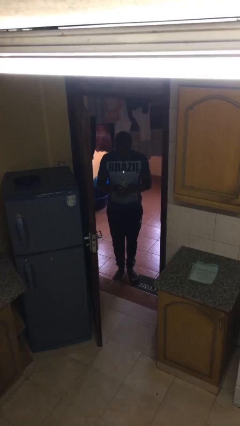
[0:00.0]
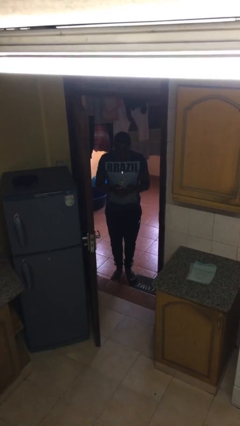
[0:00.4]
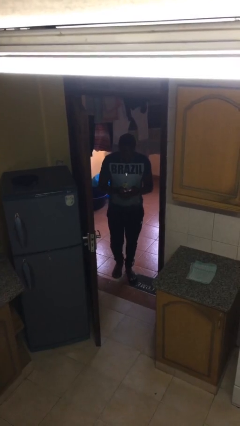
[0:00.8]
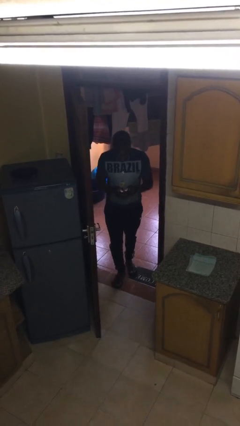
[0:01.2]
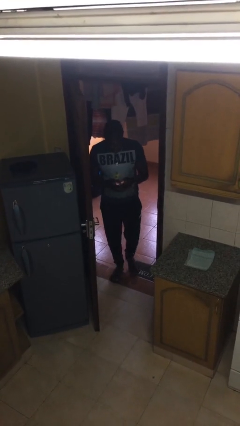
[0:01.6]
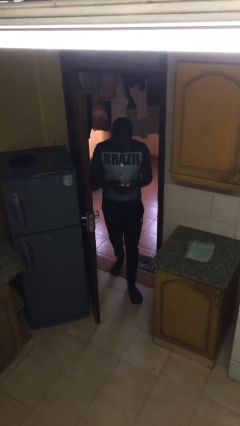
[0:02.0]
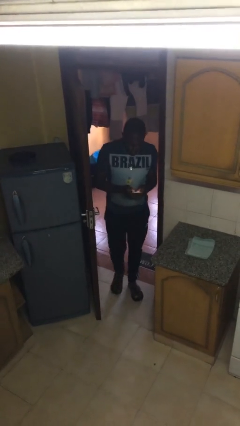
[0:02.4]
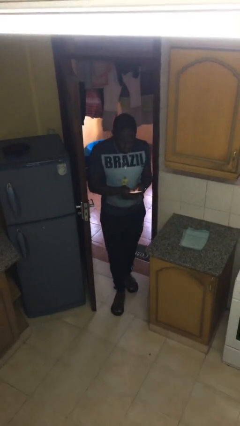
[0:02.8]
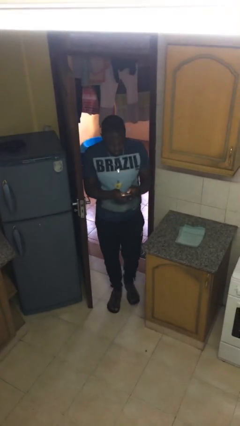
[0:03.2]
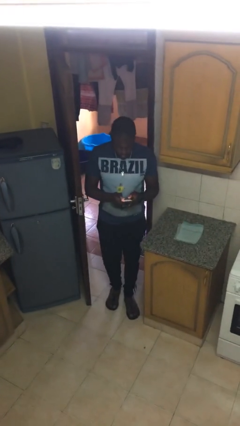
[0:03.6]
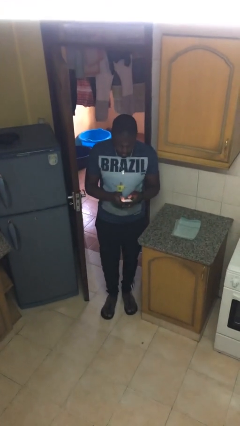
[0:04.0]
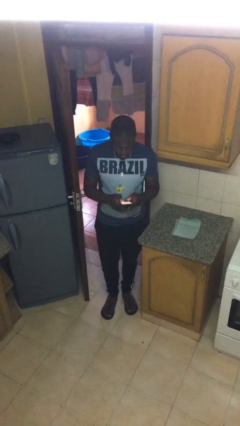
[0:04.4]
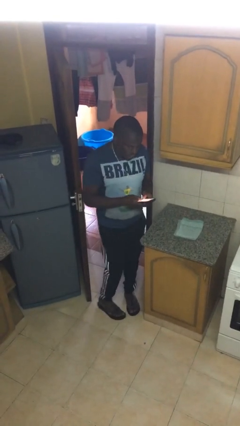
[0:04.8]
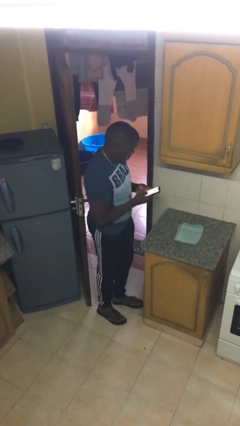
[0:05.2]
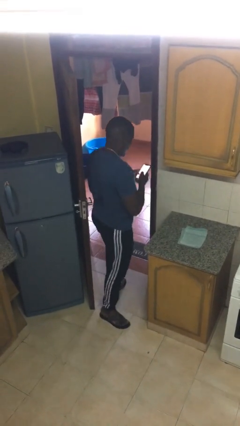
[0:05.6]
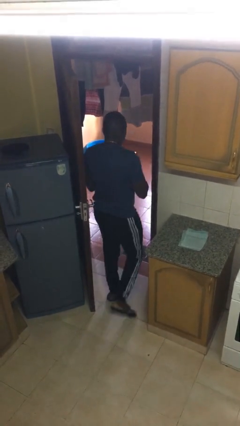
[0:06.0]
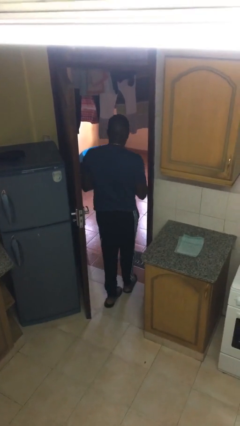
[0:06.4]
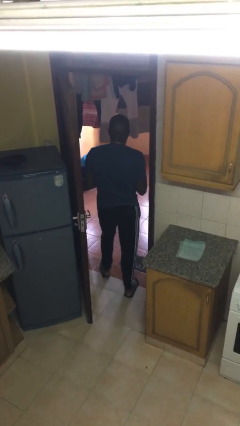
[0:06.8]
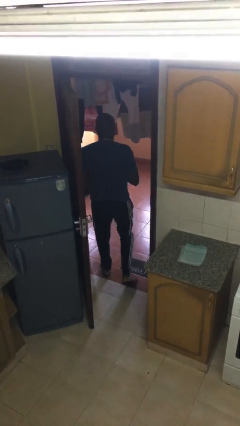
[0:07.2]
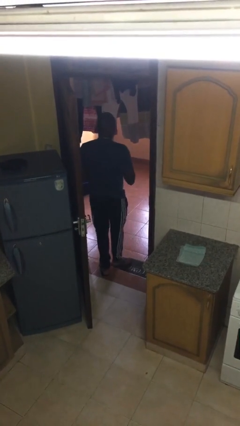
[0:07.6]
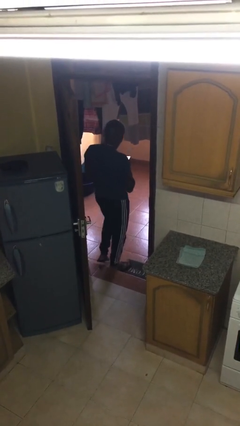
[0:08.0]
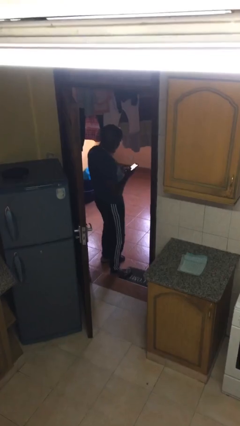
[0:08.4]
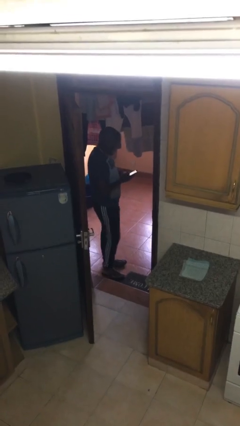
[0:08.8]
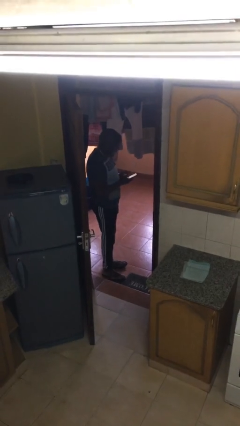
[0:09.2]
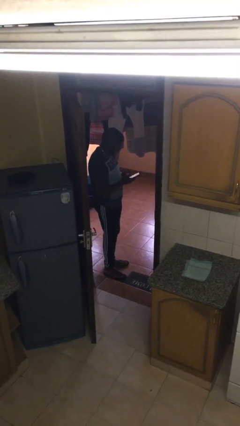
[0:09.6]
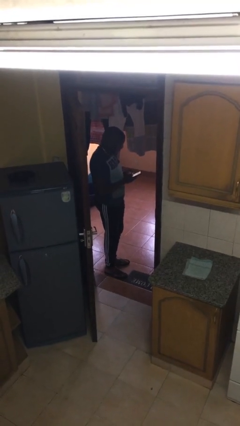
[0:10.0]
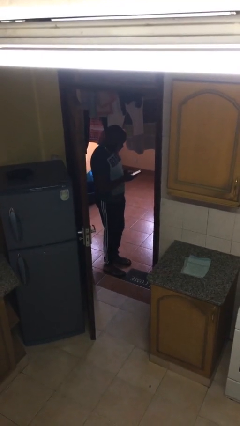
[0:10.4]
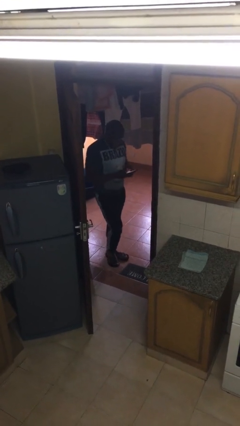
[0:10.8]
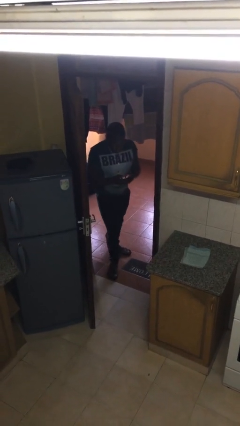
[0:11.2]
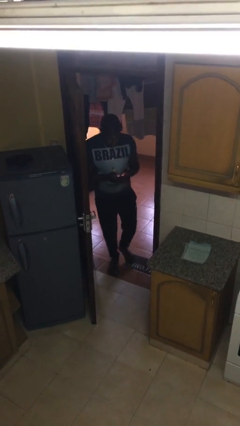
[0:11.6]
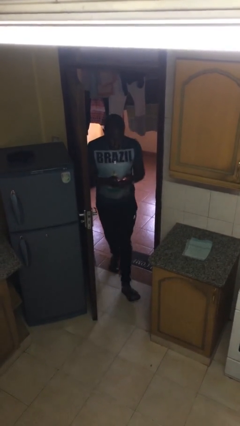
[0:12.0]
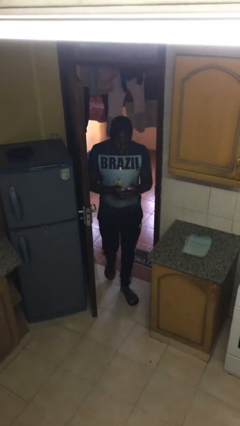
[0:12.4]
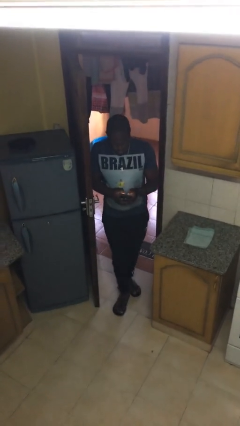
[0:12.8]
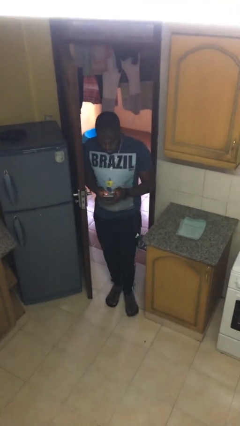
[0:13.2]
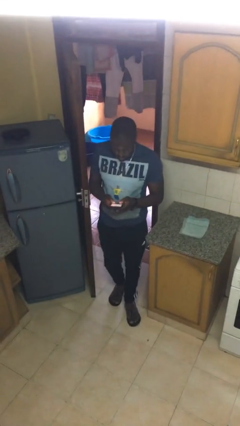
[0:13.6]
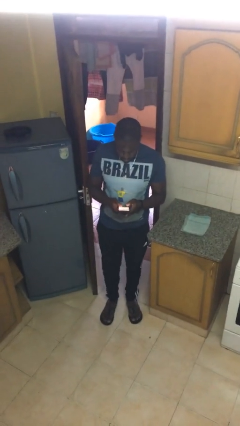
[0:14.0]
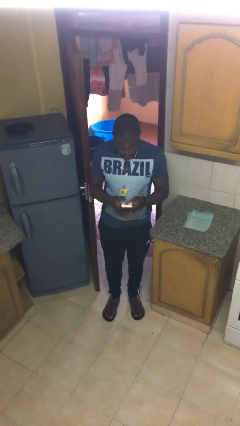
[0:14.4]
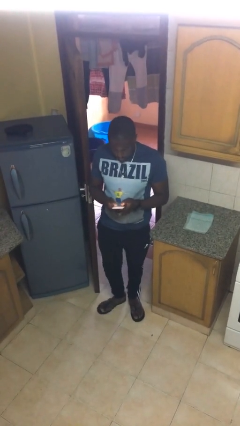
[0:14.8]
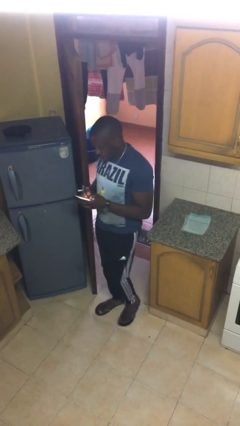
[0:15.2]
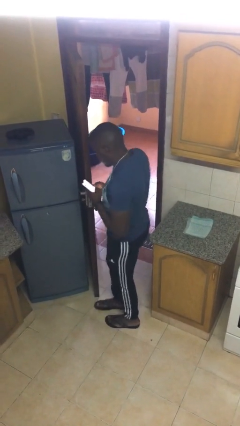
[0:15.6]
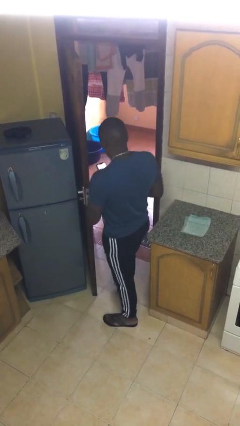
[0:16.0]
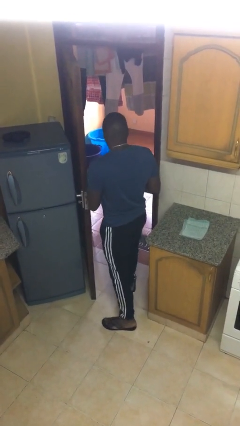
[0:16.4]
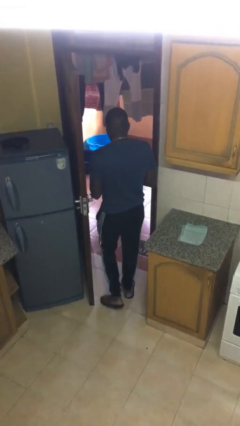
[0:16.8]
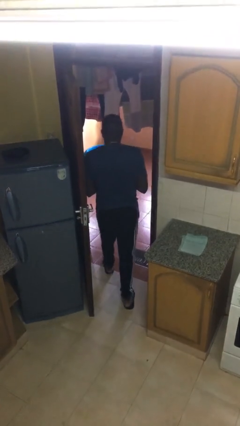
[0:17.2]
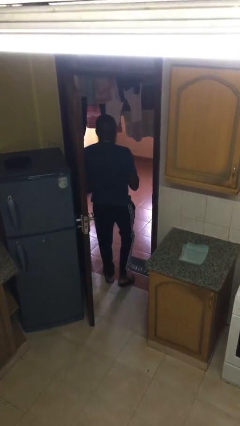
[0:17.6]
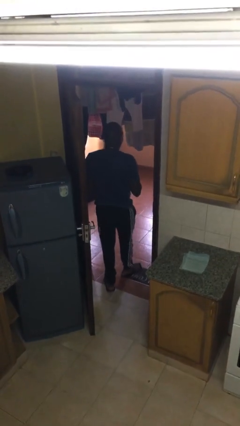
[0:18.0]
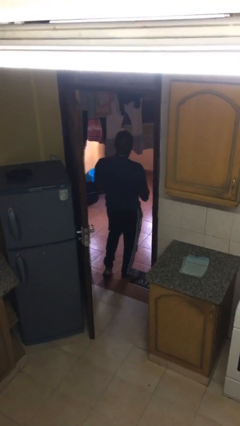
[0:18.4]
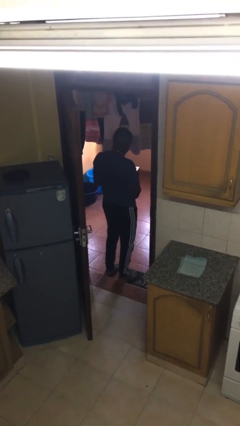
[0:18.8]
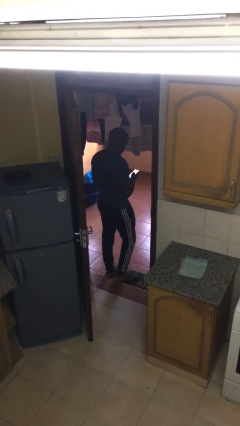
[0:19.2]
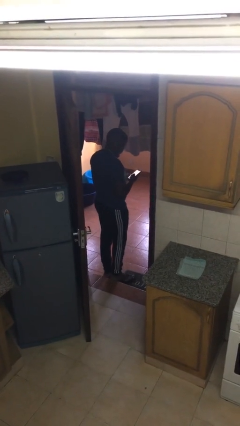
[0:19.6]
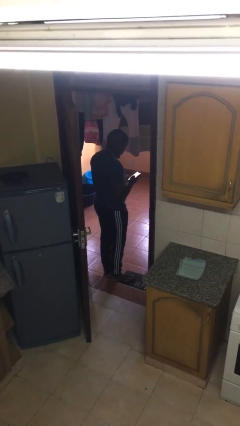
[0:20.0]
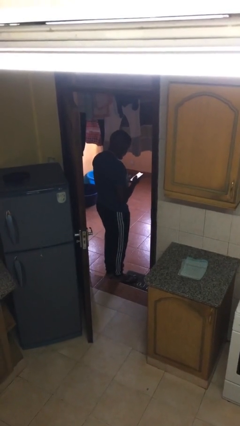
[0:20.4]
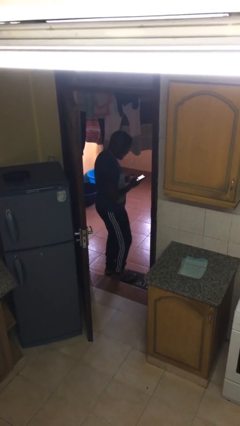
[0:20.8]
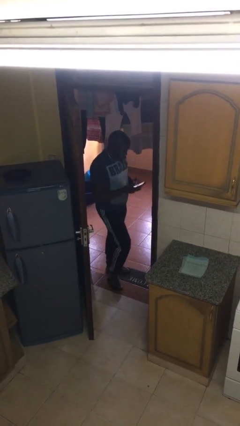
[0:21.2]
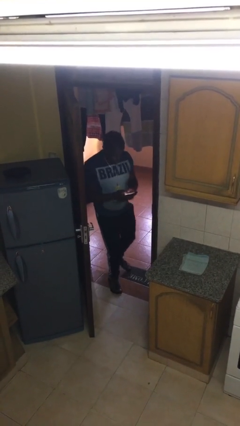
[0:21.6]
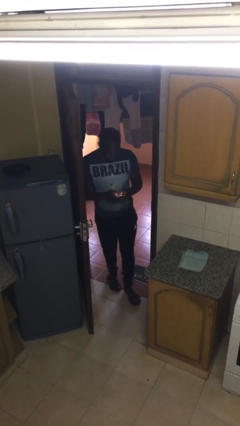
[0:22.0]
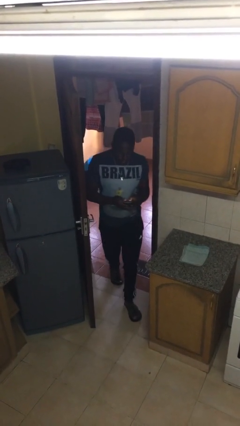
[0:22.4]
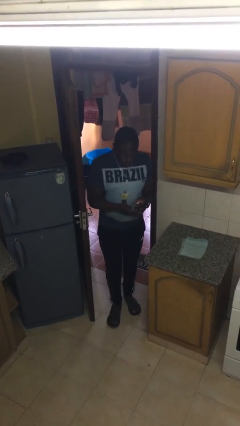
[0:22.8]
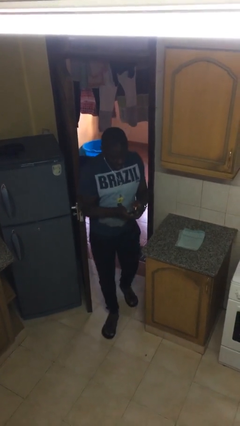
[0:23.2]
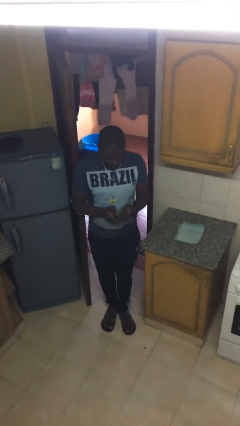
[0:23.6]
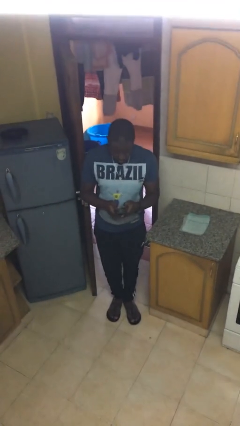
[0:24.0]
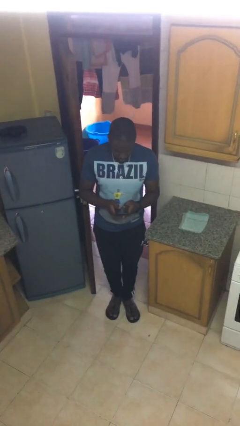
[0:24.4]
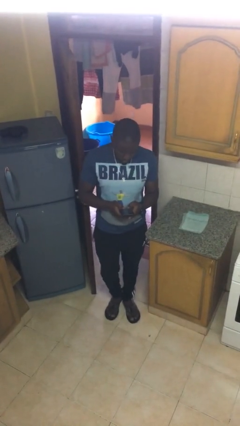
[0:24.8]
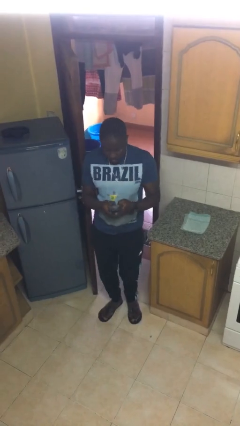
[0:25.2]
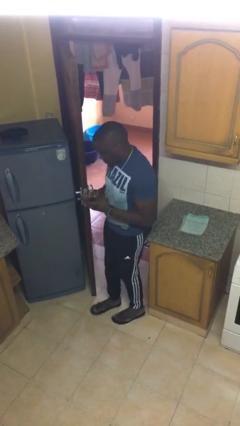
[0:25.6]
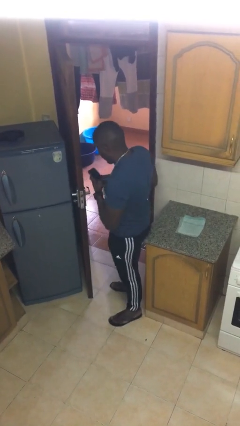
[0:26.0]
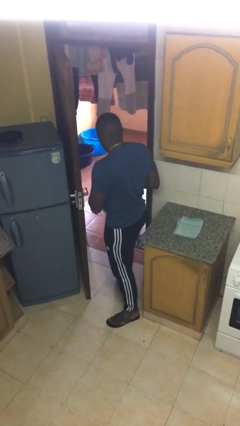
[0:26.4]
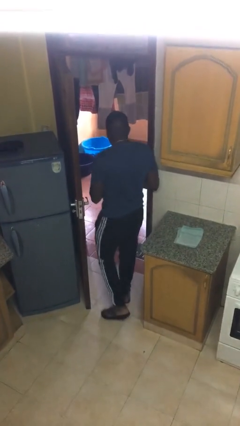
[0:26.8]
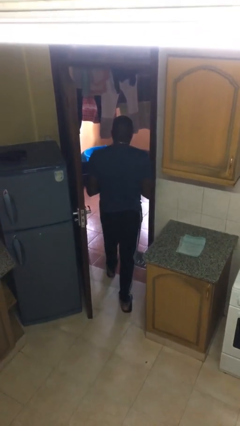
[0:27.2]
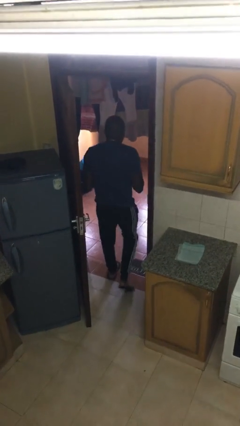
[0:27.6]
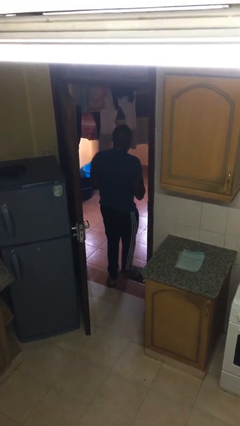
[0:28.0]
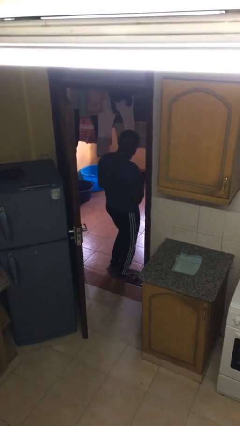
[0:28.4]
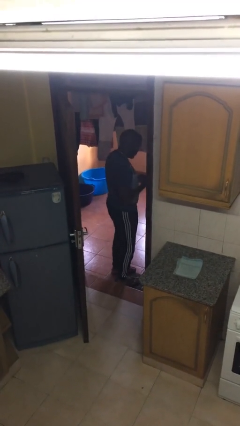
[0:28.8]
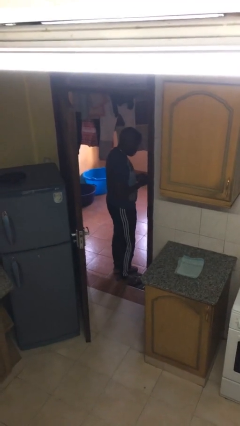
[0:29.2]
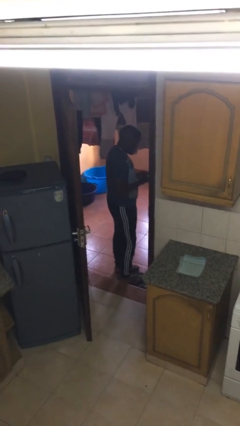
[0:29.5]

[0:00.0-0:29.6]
person texts on phone

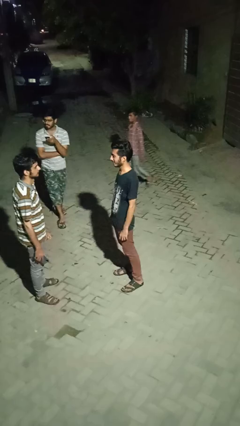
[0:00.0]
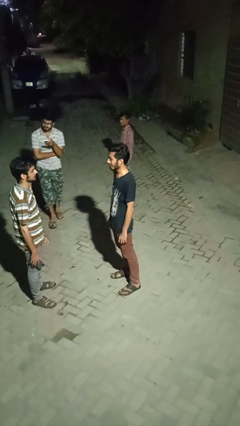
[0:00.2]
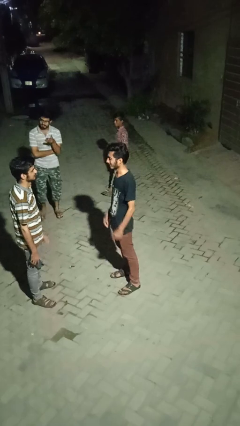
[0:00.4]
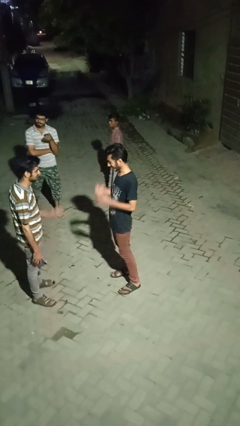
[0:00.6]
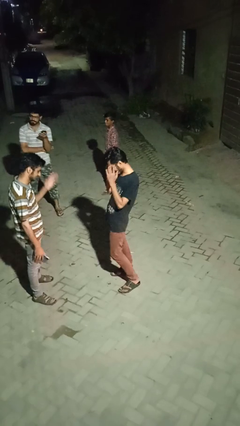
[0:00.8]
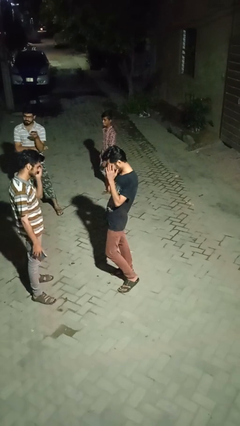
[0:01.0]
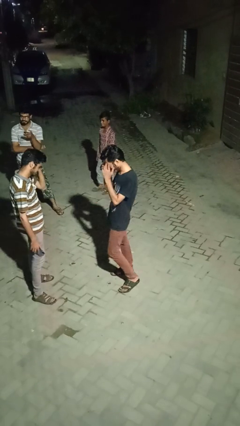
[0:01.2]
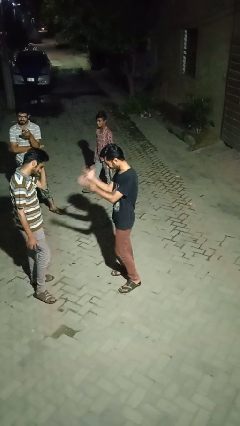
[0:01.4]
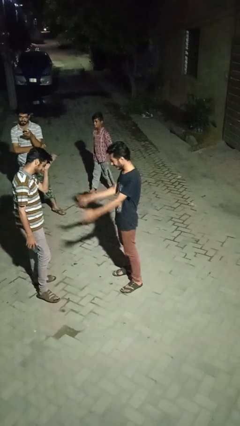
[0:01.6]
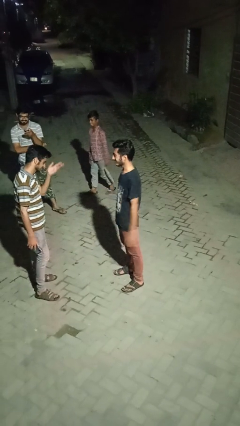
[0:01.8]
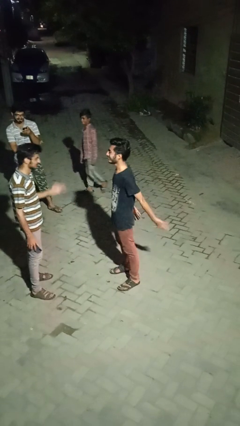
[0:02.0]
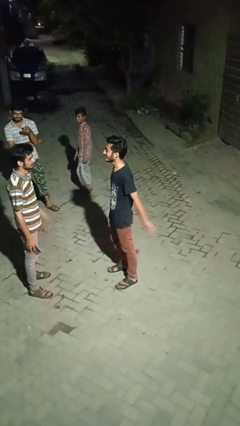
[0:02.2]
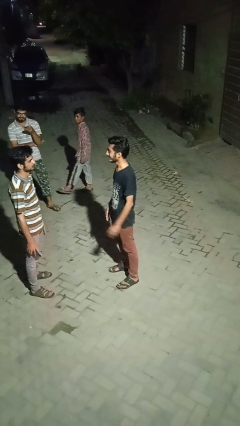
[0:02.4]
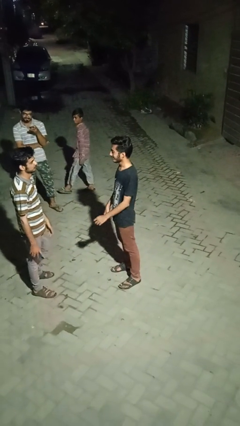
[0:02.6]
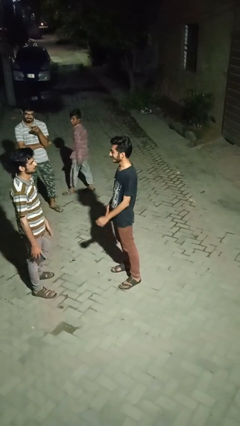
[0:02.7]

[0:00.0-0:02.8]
person laughs with person

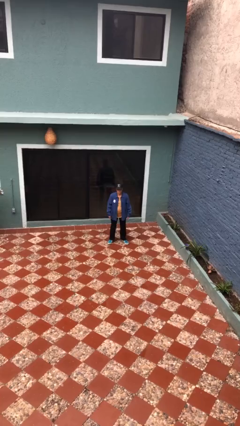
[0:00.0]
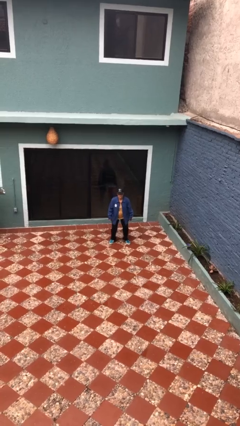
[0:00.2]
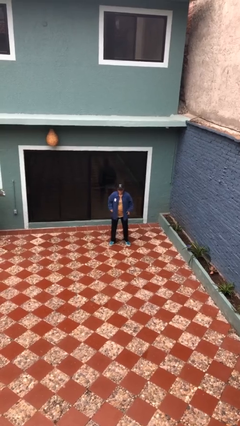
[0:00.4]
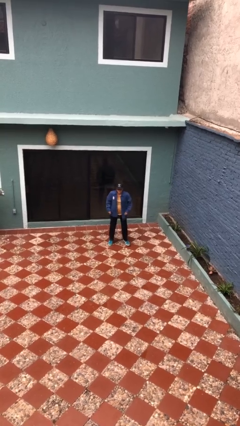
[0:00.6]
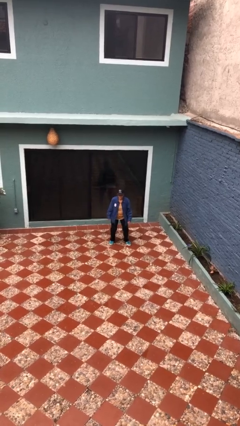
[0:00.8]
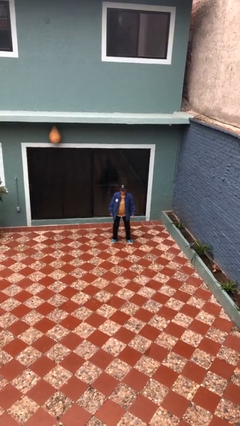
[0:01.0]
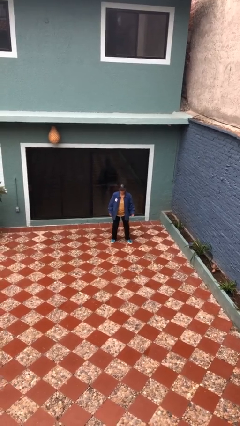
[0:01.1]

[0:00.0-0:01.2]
person jumps
